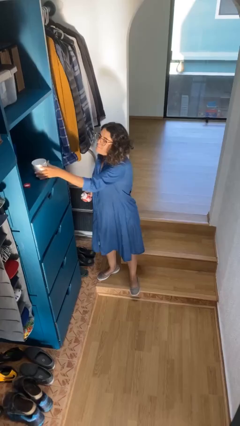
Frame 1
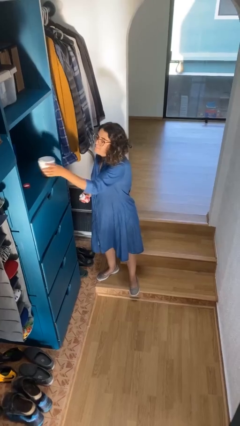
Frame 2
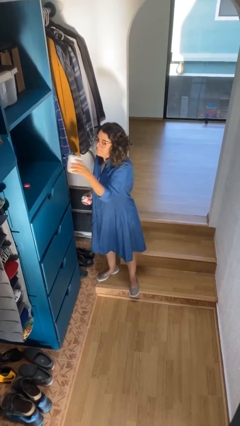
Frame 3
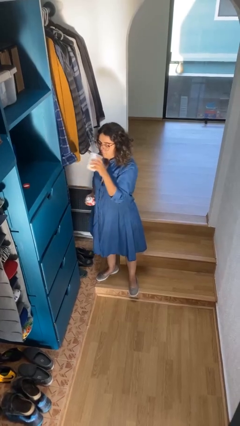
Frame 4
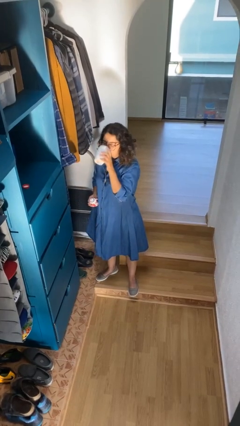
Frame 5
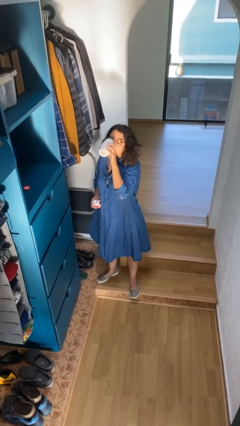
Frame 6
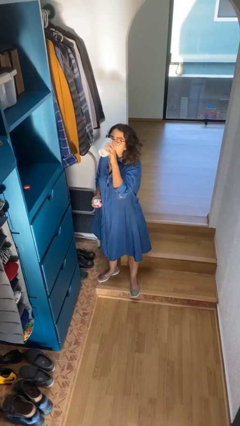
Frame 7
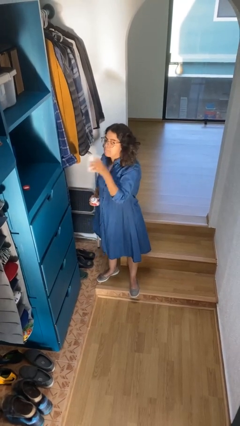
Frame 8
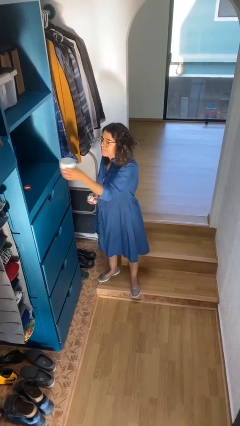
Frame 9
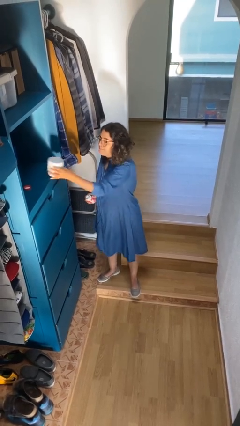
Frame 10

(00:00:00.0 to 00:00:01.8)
person drinks from cup

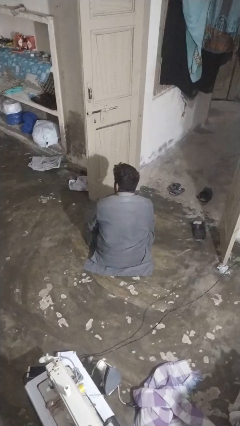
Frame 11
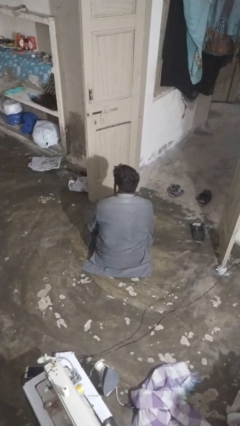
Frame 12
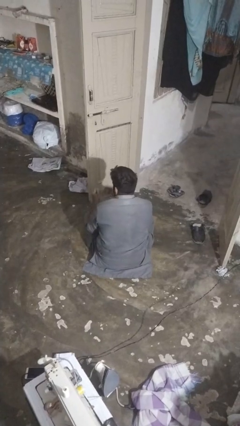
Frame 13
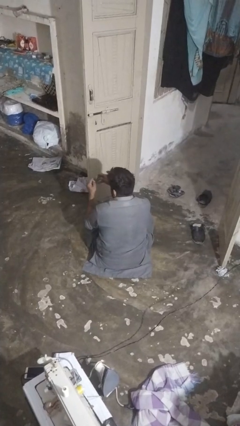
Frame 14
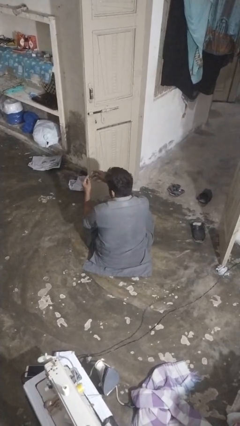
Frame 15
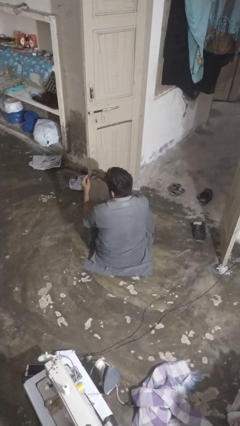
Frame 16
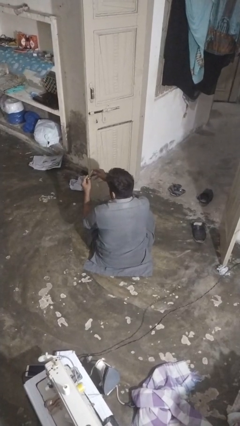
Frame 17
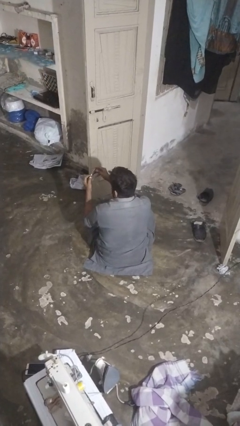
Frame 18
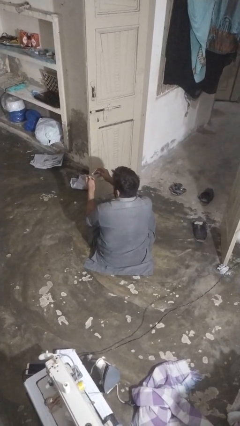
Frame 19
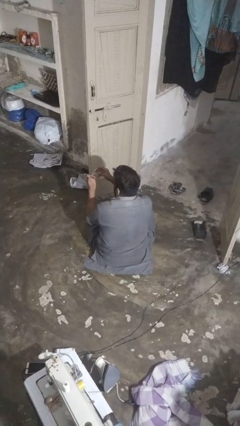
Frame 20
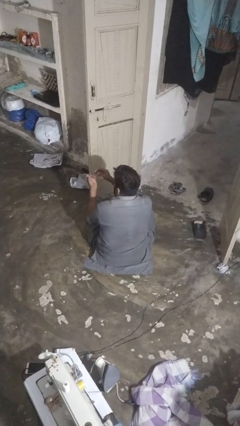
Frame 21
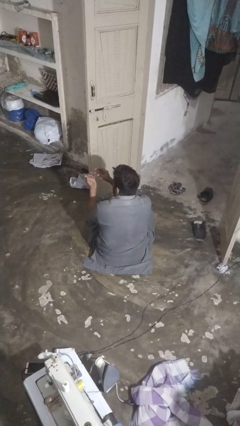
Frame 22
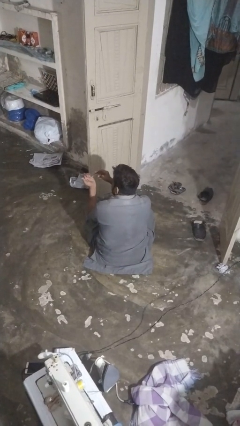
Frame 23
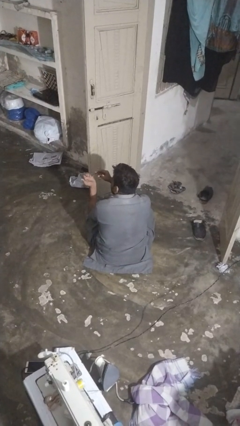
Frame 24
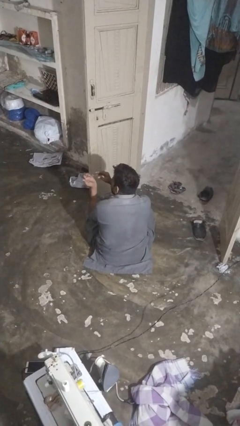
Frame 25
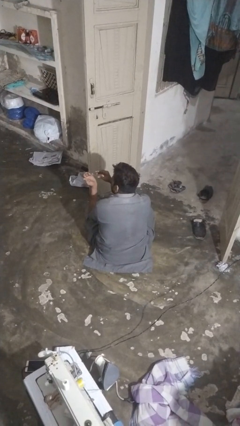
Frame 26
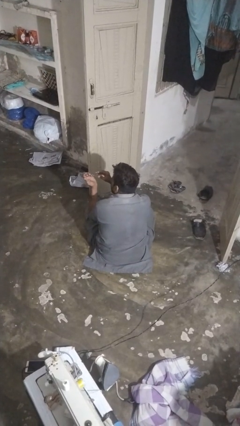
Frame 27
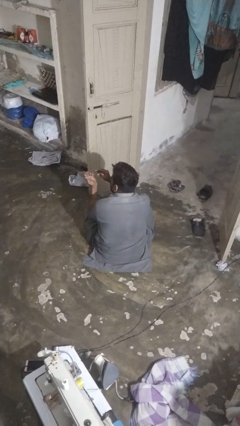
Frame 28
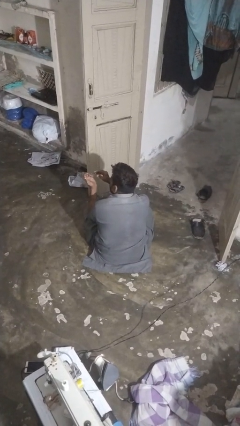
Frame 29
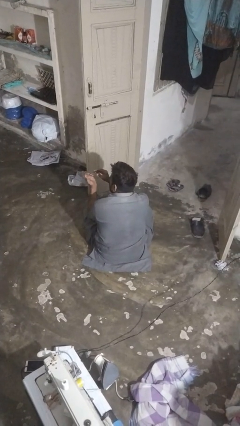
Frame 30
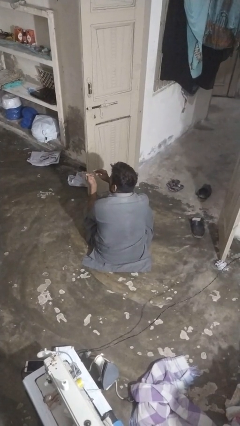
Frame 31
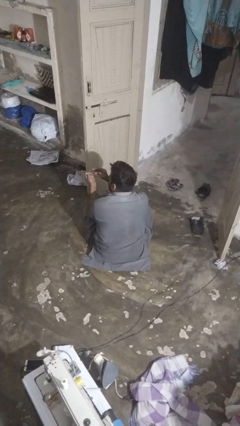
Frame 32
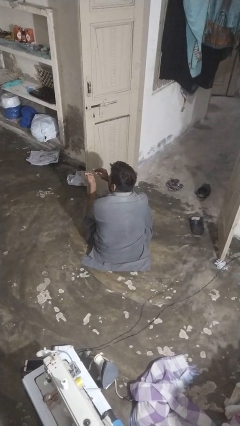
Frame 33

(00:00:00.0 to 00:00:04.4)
person clips fingernails

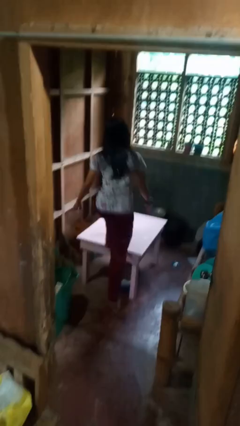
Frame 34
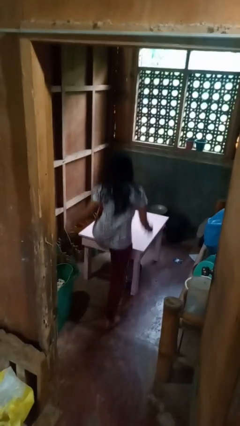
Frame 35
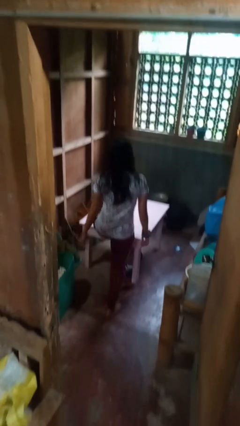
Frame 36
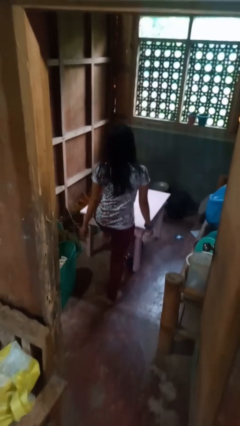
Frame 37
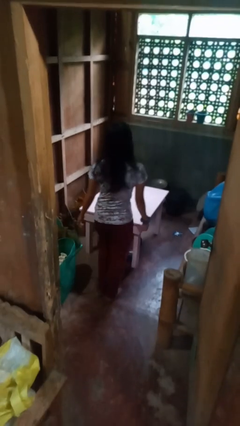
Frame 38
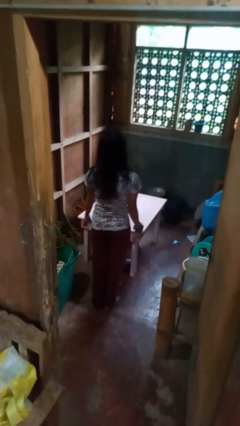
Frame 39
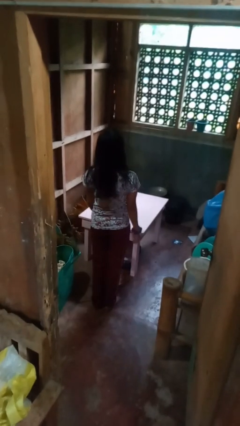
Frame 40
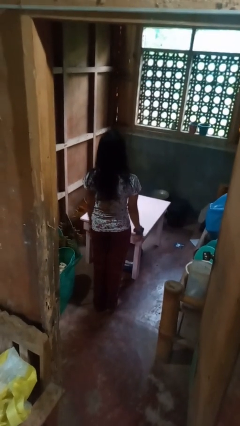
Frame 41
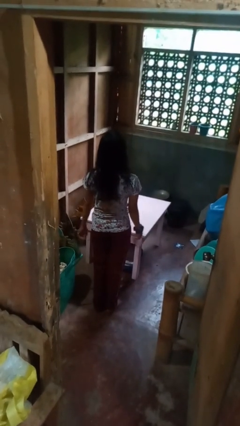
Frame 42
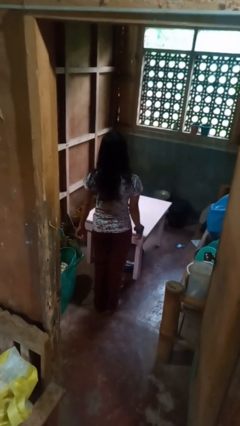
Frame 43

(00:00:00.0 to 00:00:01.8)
person climbs off table

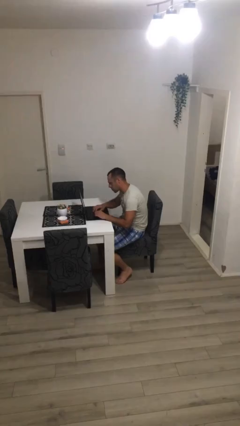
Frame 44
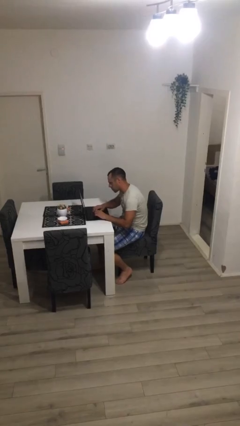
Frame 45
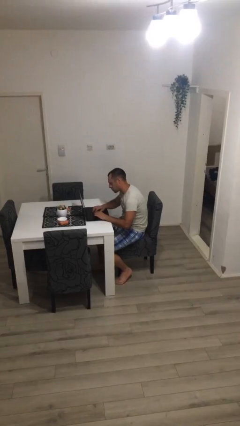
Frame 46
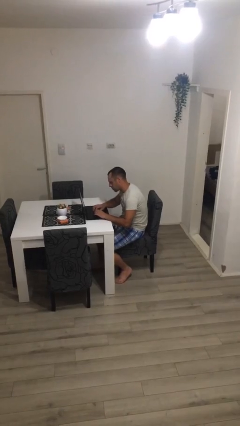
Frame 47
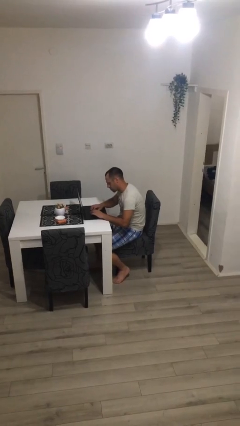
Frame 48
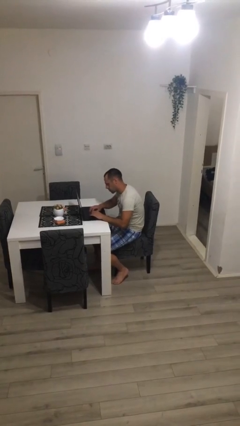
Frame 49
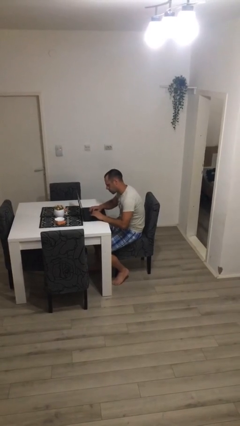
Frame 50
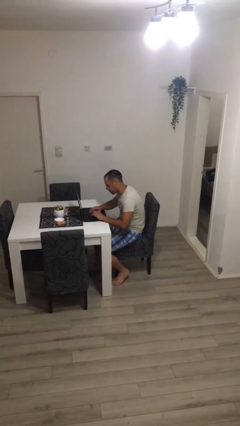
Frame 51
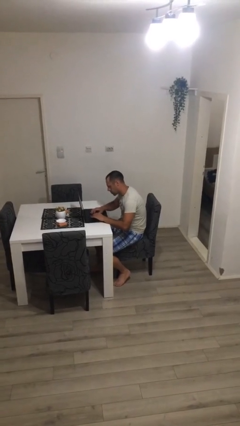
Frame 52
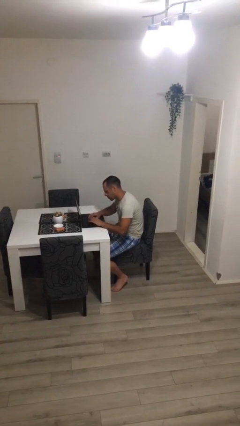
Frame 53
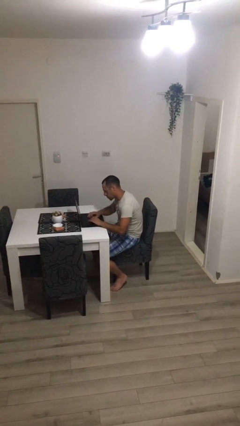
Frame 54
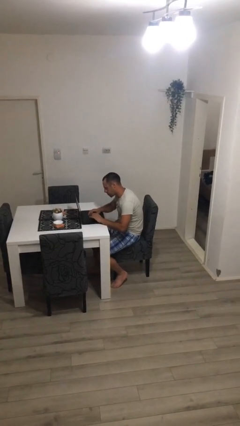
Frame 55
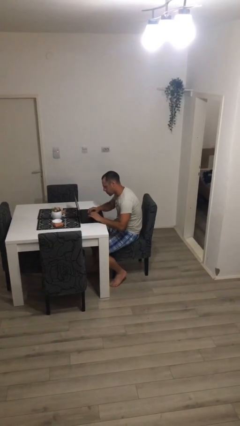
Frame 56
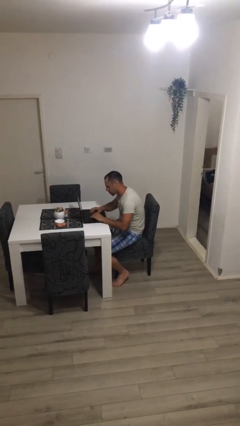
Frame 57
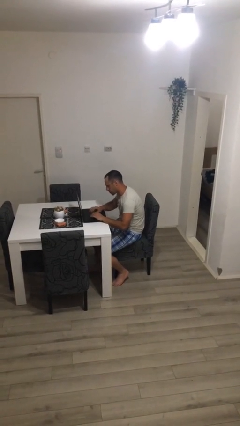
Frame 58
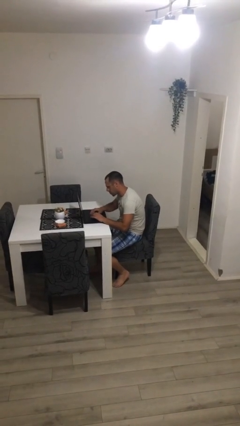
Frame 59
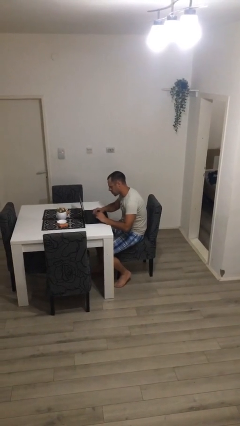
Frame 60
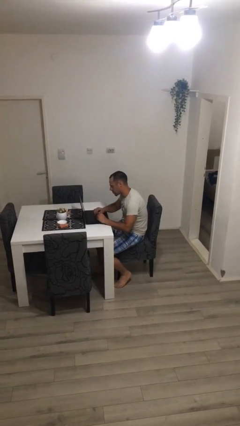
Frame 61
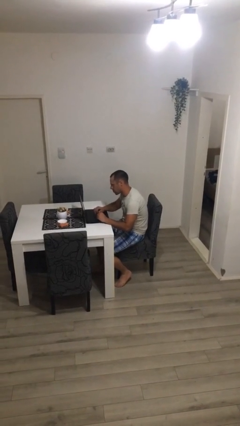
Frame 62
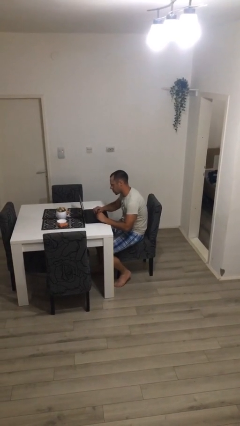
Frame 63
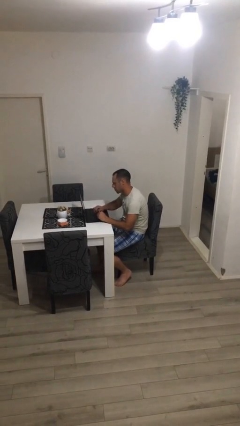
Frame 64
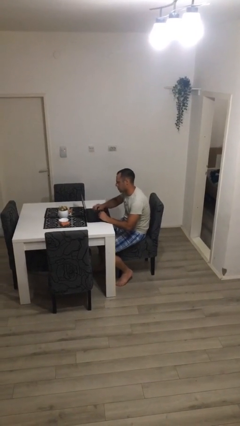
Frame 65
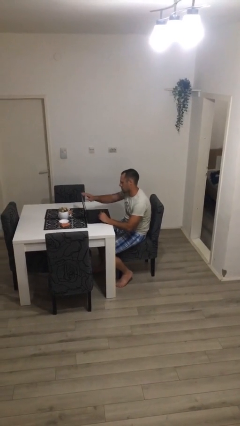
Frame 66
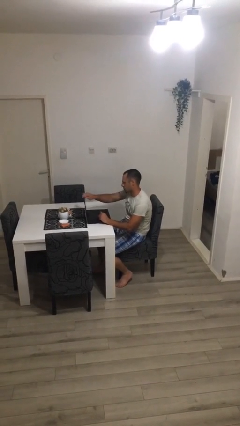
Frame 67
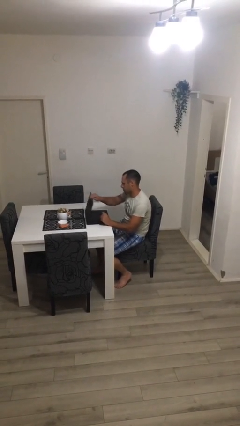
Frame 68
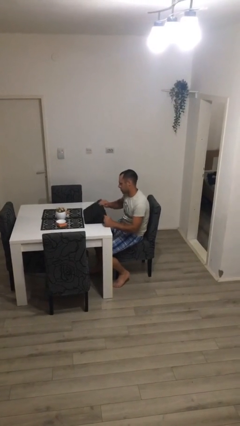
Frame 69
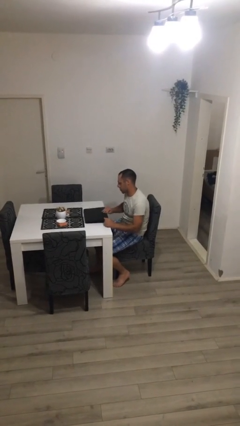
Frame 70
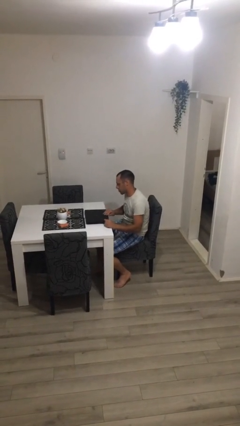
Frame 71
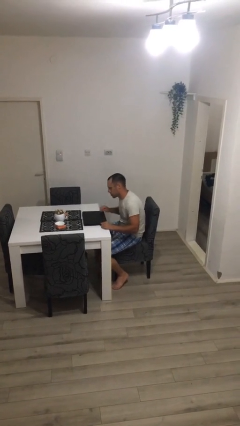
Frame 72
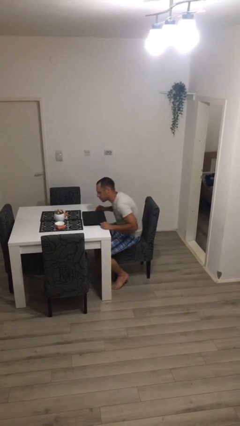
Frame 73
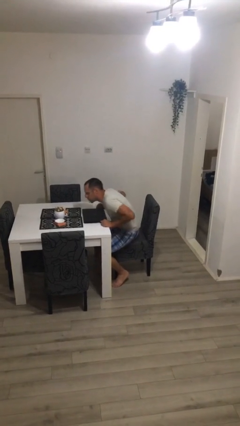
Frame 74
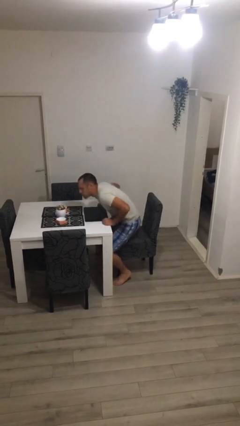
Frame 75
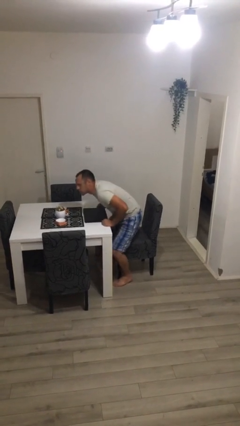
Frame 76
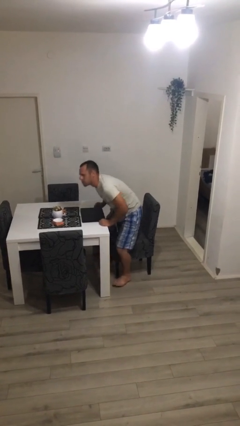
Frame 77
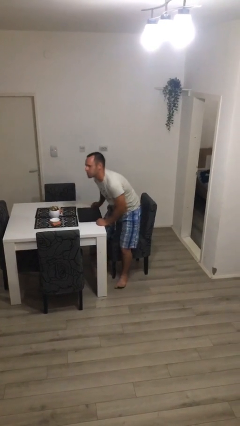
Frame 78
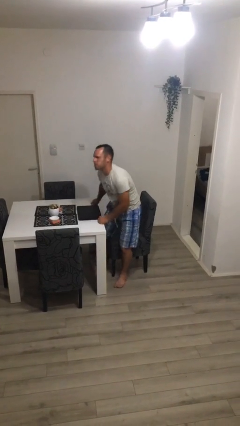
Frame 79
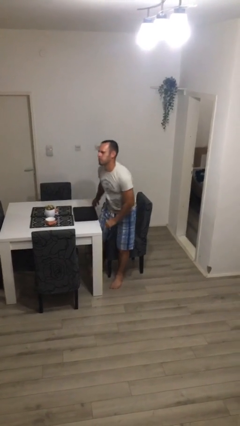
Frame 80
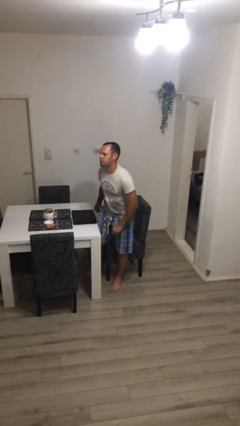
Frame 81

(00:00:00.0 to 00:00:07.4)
person interacts with laptop

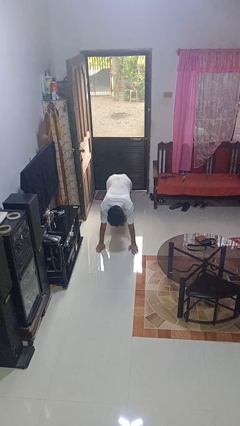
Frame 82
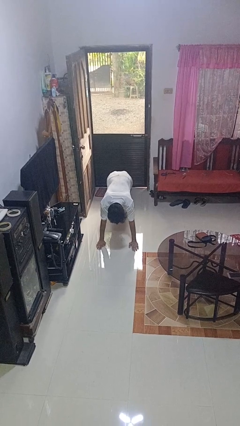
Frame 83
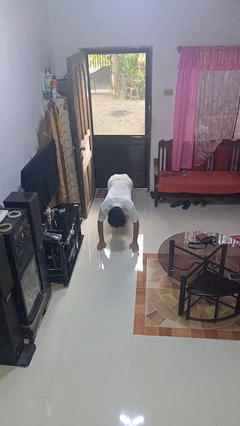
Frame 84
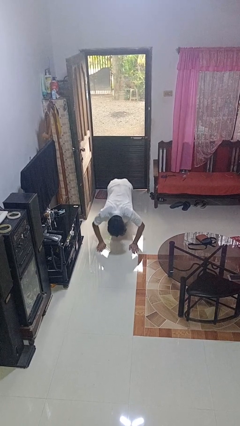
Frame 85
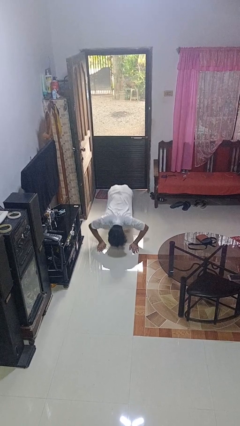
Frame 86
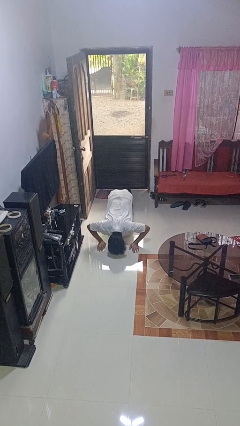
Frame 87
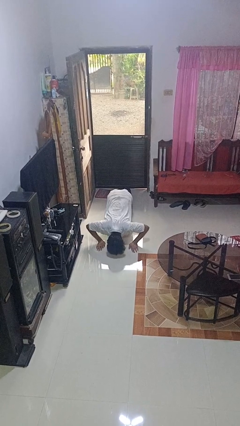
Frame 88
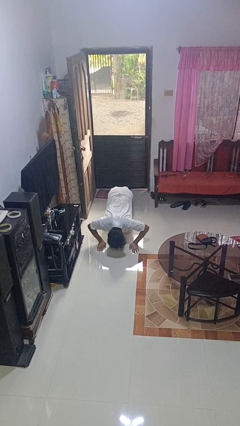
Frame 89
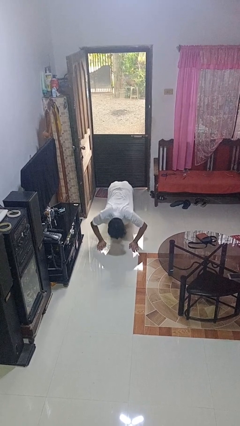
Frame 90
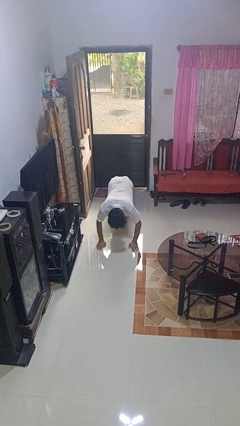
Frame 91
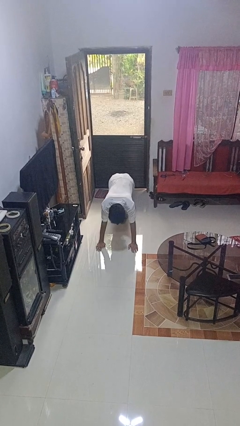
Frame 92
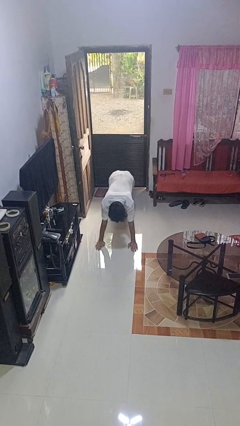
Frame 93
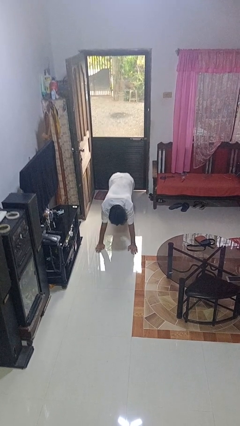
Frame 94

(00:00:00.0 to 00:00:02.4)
person exercises with pushup
